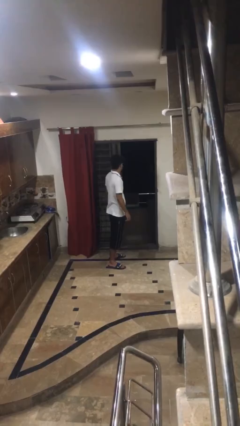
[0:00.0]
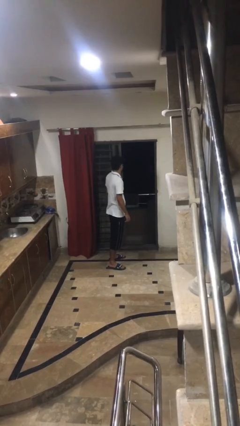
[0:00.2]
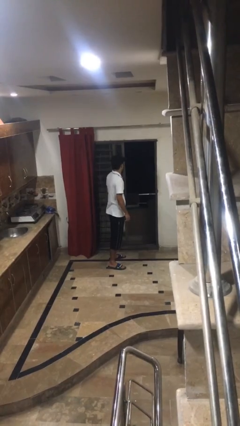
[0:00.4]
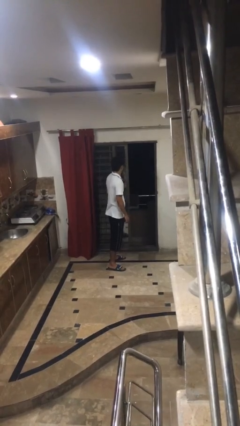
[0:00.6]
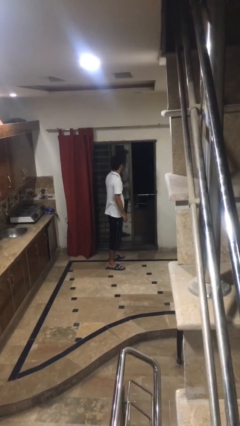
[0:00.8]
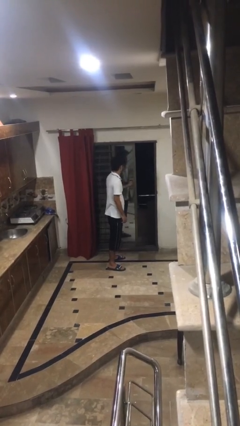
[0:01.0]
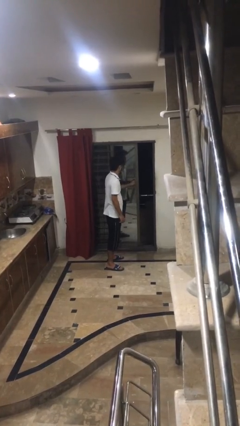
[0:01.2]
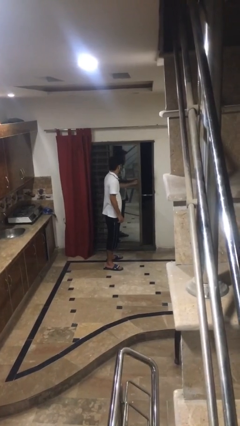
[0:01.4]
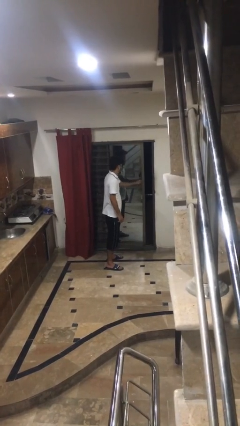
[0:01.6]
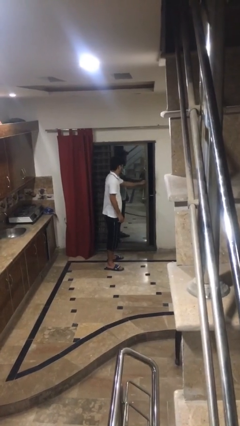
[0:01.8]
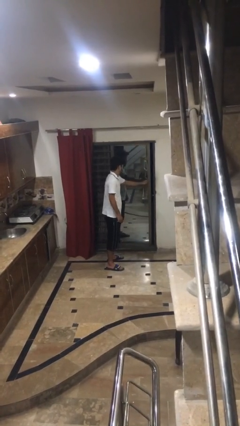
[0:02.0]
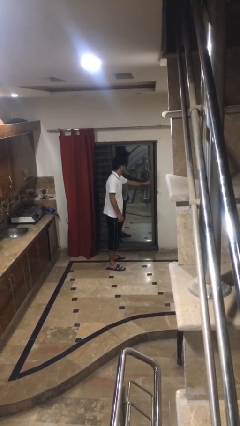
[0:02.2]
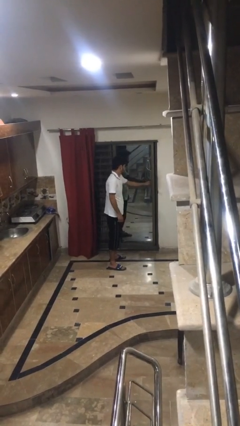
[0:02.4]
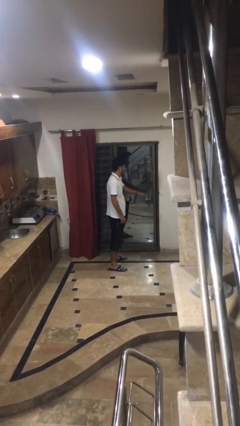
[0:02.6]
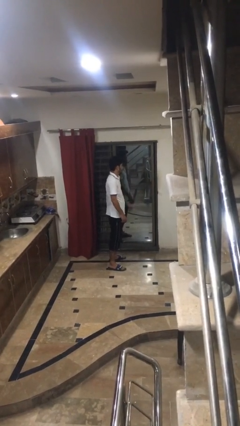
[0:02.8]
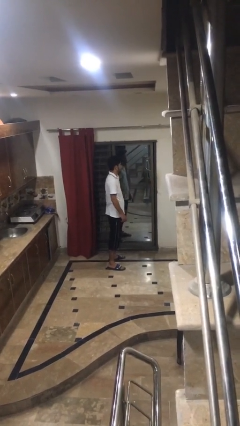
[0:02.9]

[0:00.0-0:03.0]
person closes sliding door

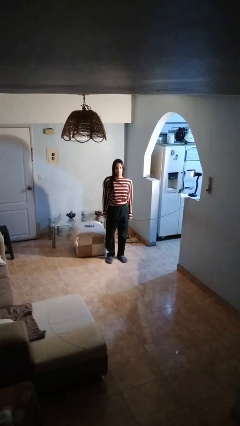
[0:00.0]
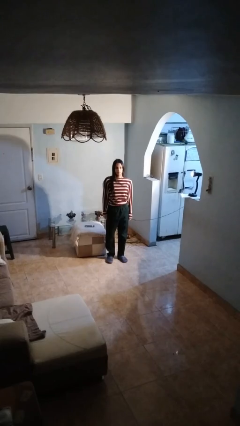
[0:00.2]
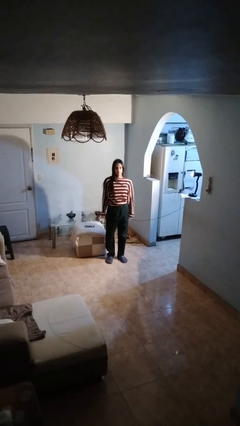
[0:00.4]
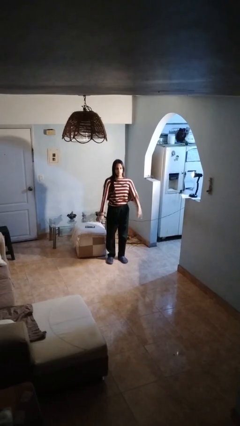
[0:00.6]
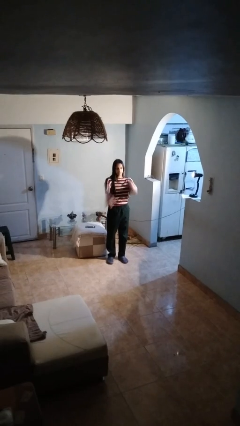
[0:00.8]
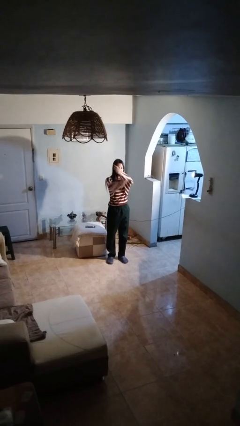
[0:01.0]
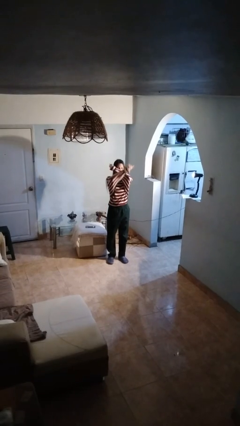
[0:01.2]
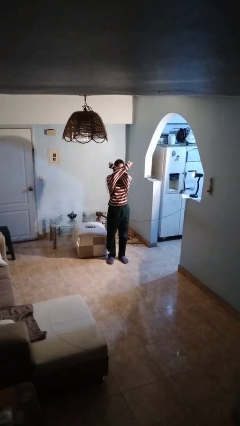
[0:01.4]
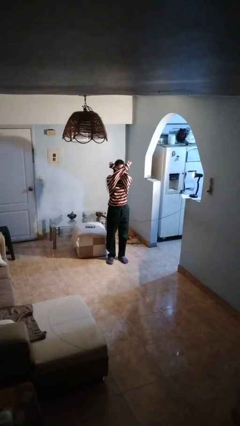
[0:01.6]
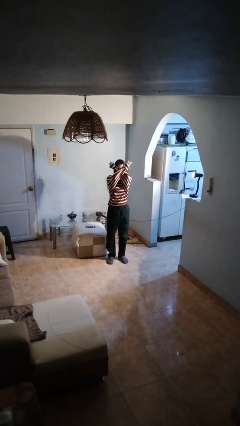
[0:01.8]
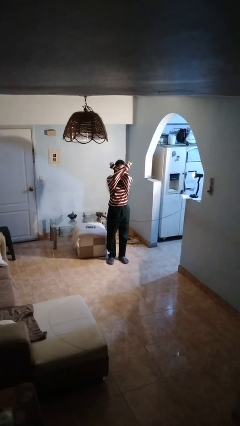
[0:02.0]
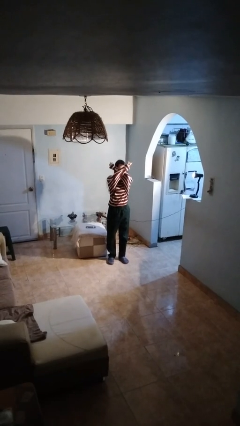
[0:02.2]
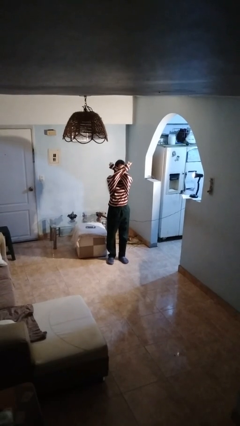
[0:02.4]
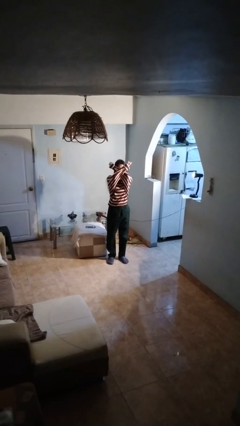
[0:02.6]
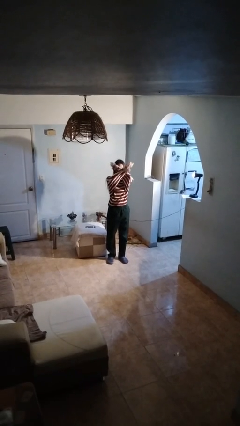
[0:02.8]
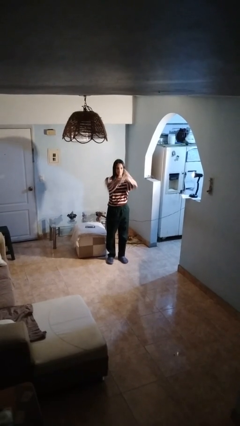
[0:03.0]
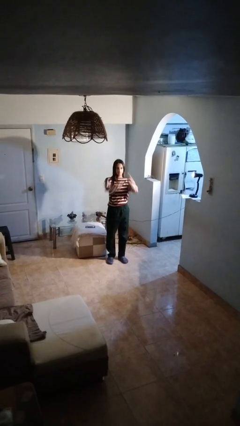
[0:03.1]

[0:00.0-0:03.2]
person gestures arms x

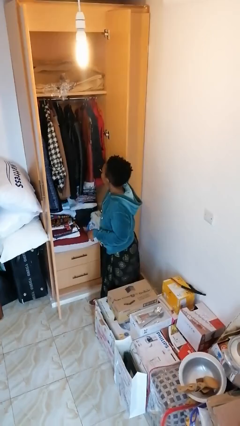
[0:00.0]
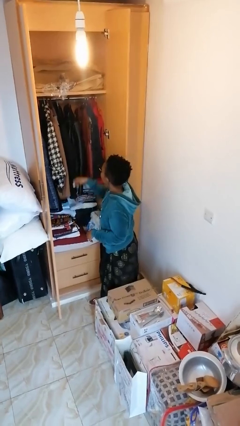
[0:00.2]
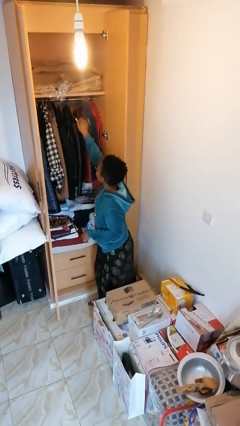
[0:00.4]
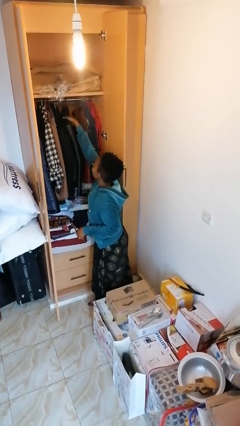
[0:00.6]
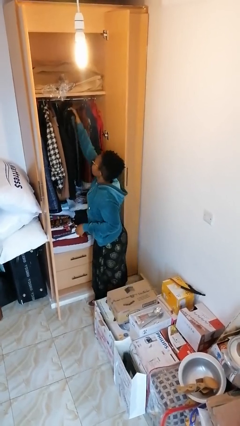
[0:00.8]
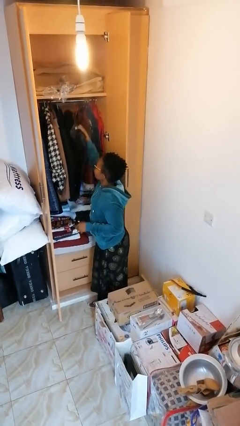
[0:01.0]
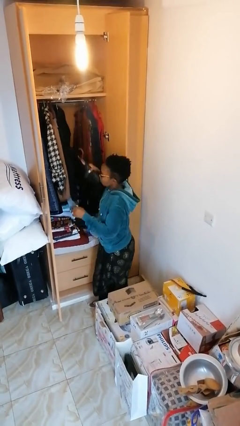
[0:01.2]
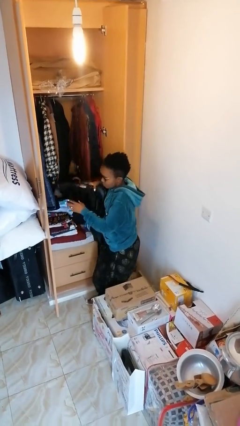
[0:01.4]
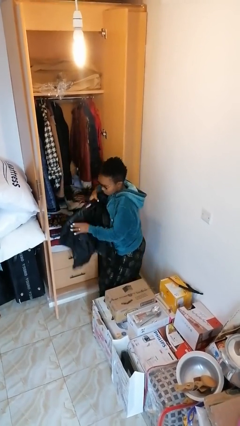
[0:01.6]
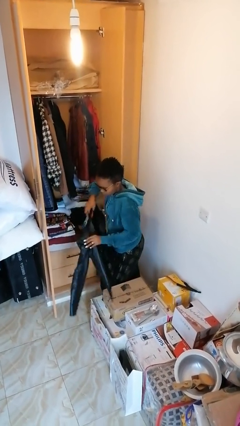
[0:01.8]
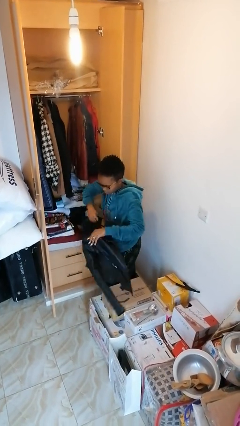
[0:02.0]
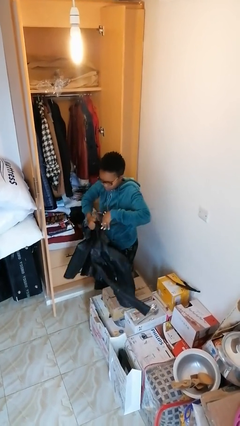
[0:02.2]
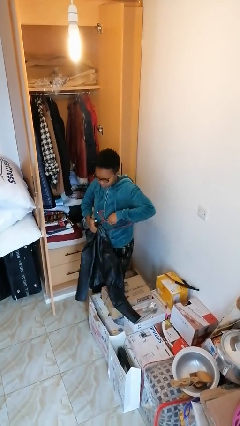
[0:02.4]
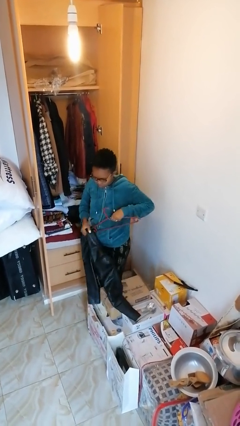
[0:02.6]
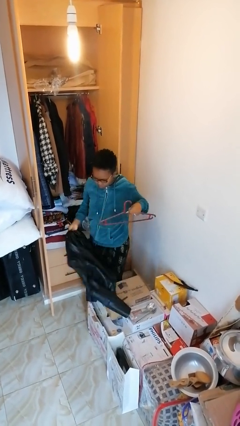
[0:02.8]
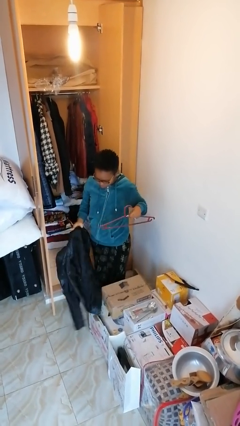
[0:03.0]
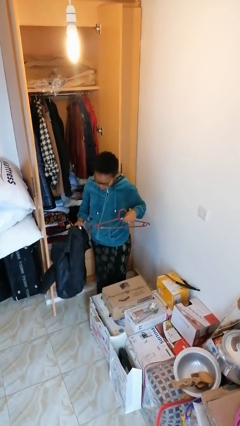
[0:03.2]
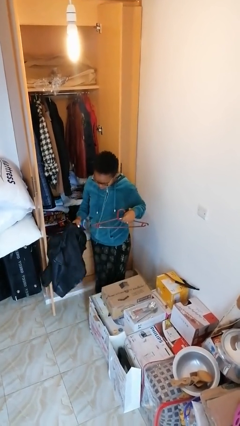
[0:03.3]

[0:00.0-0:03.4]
person takes clothes from closet

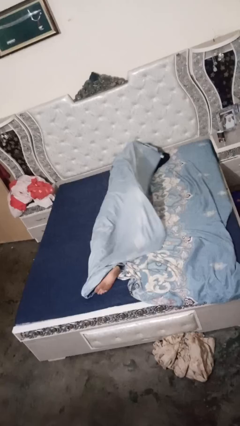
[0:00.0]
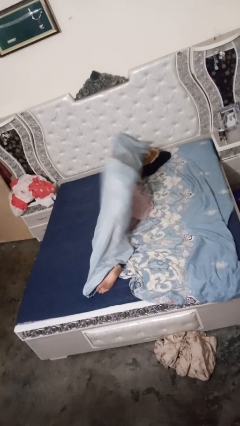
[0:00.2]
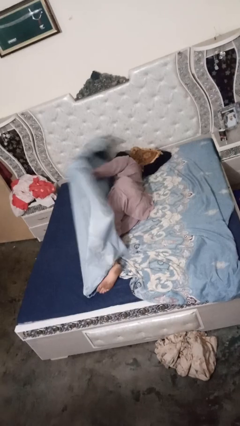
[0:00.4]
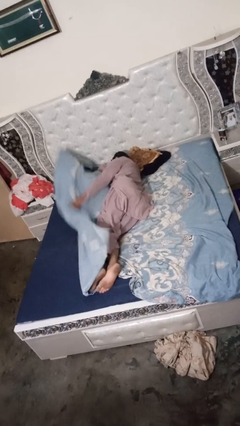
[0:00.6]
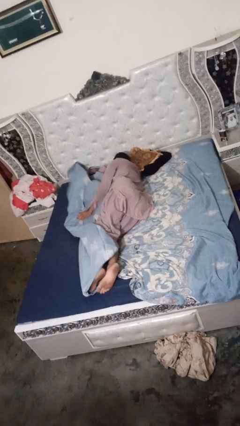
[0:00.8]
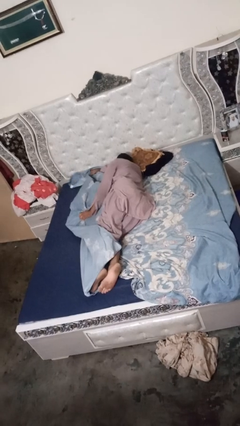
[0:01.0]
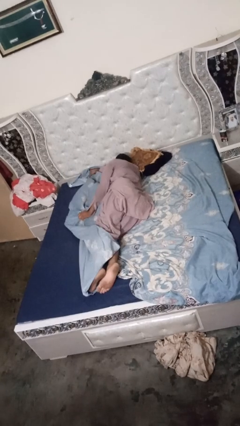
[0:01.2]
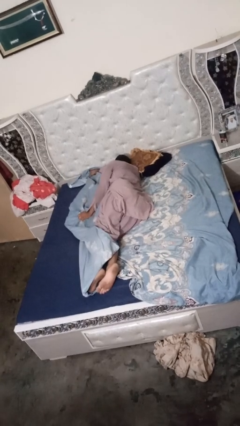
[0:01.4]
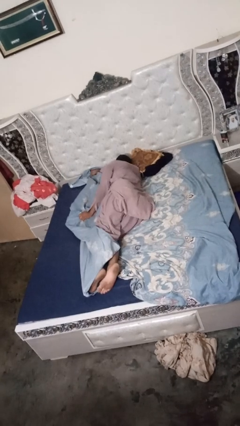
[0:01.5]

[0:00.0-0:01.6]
person uncovers with bedsheets

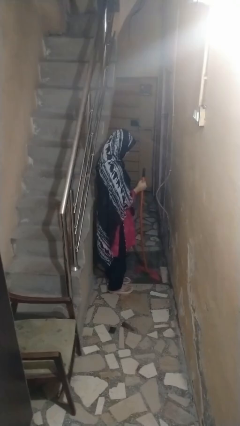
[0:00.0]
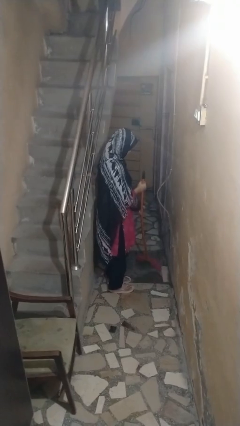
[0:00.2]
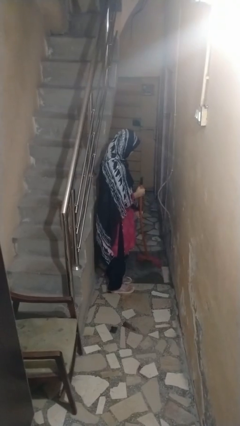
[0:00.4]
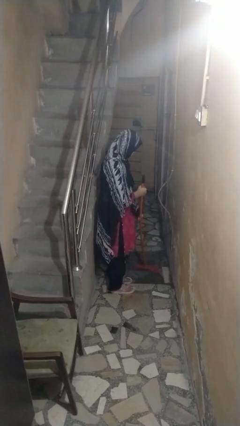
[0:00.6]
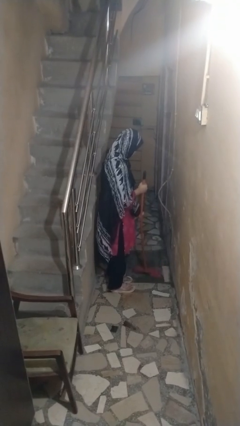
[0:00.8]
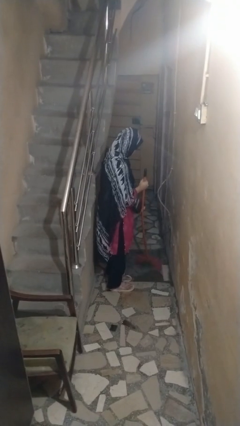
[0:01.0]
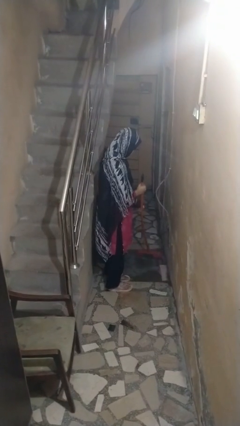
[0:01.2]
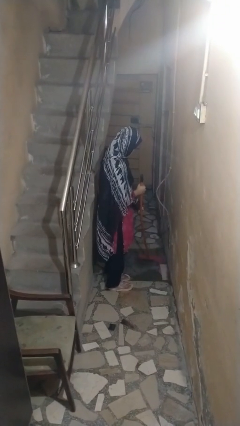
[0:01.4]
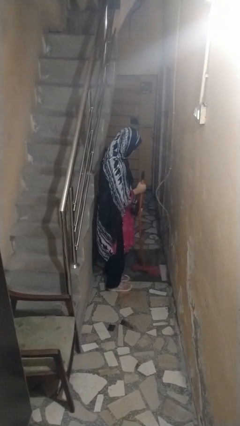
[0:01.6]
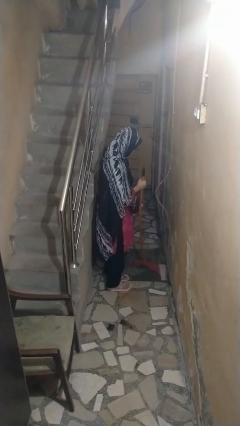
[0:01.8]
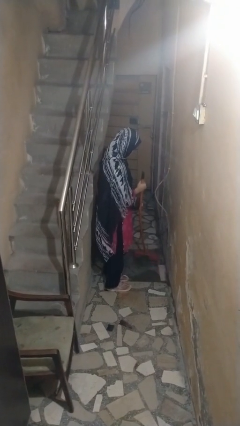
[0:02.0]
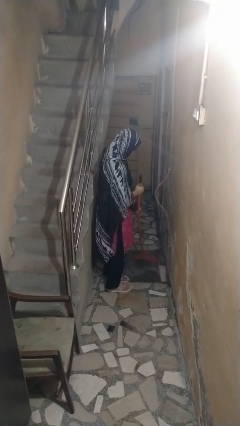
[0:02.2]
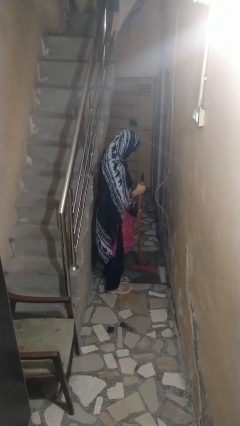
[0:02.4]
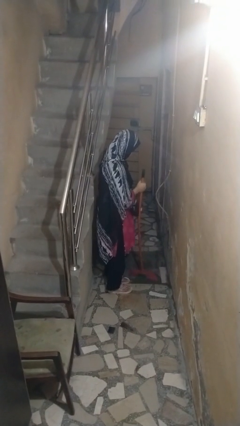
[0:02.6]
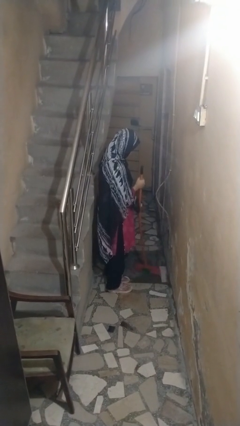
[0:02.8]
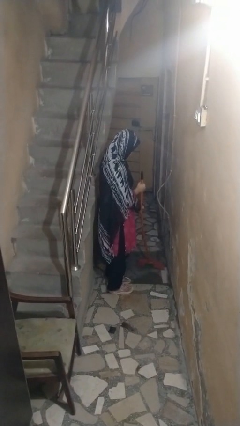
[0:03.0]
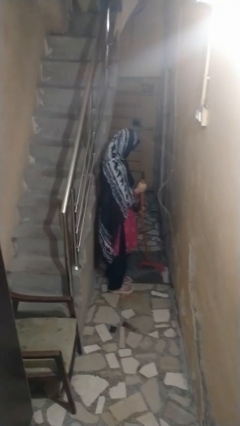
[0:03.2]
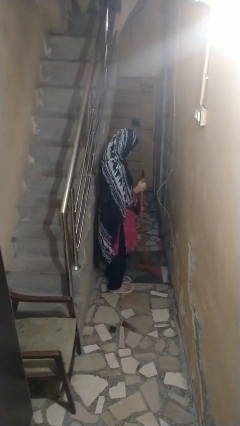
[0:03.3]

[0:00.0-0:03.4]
person sweeps floor

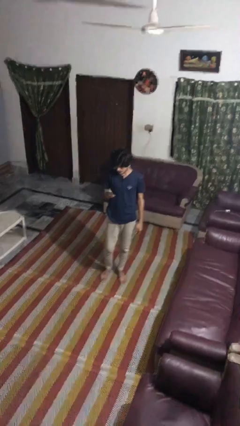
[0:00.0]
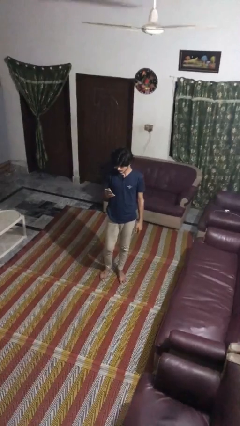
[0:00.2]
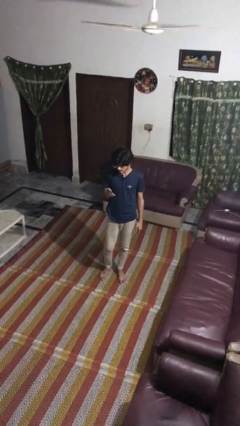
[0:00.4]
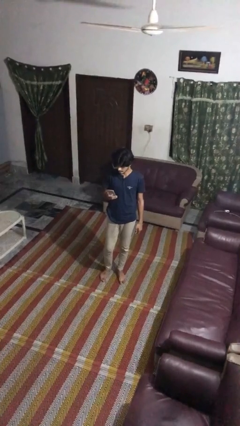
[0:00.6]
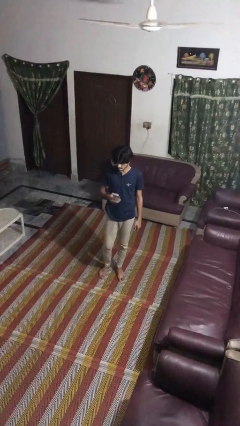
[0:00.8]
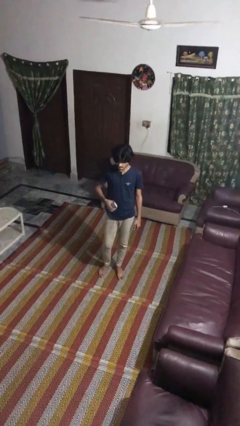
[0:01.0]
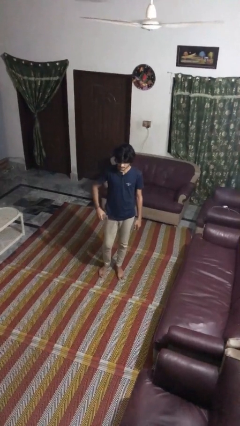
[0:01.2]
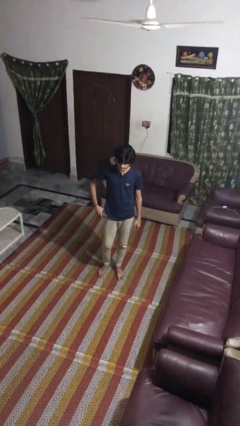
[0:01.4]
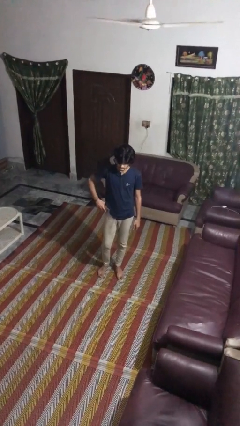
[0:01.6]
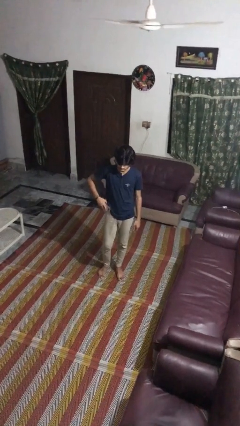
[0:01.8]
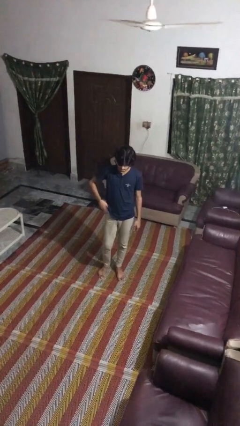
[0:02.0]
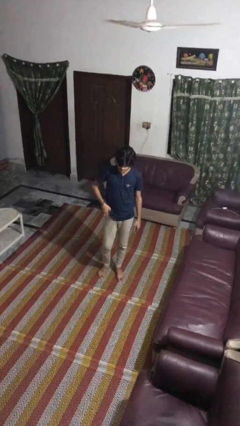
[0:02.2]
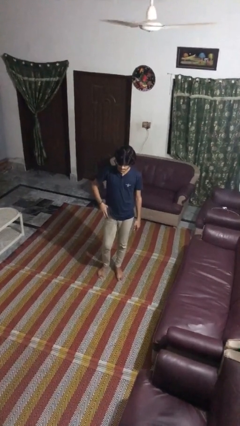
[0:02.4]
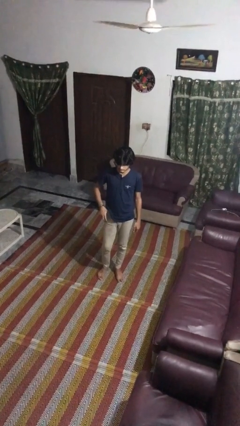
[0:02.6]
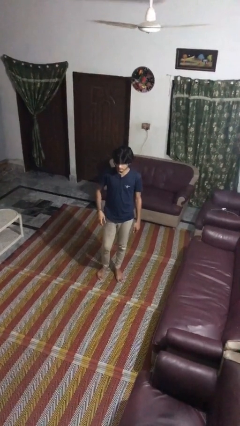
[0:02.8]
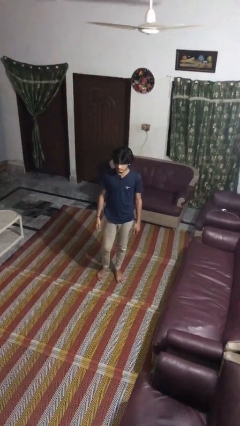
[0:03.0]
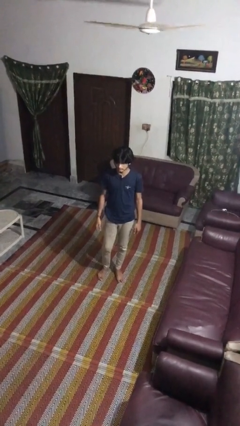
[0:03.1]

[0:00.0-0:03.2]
person puts phone into pocket
